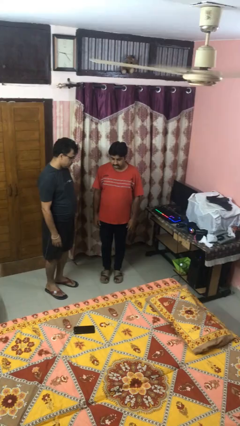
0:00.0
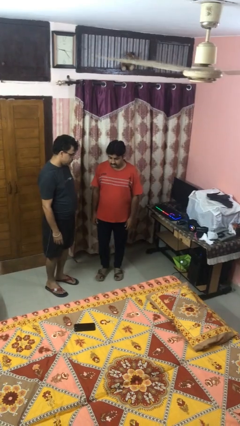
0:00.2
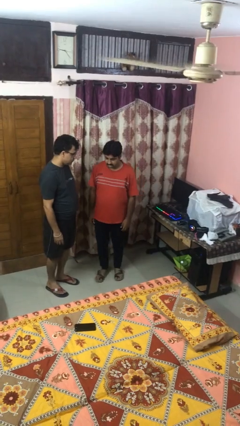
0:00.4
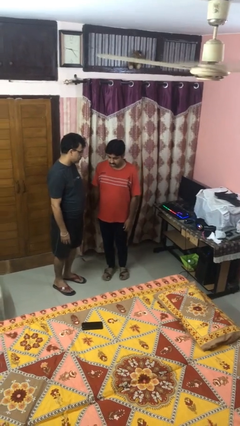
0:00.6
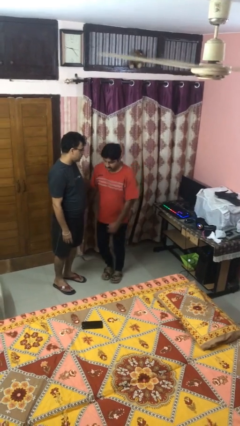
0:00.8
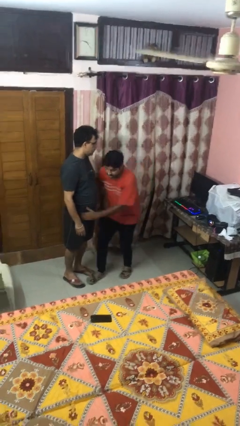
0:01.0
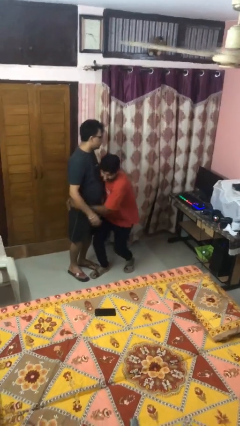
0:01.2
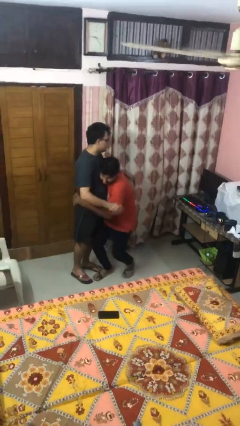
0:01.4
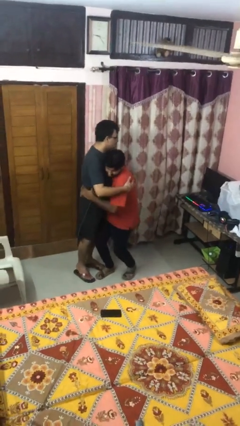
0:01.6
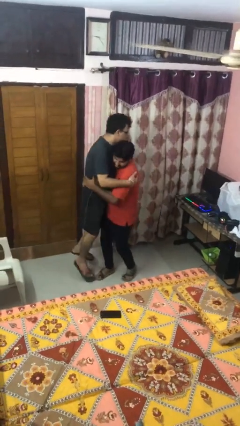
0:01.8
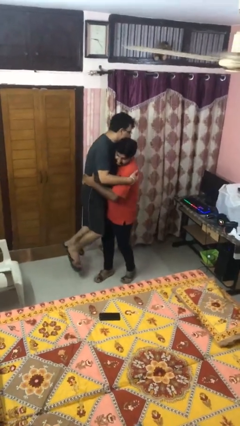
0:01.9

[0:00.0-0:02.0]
person picks up person

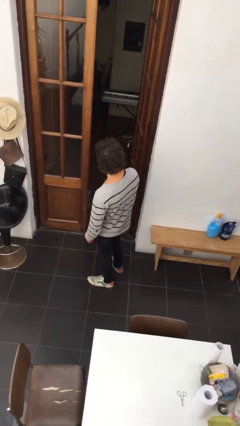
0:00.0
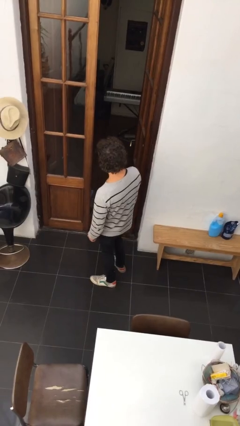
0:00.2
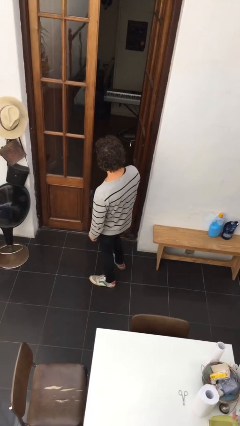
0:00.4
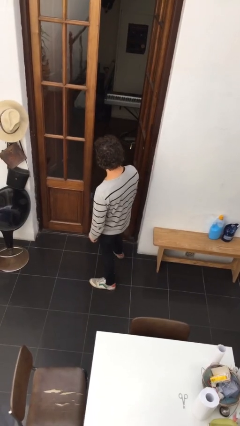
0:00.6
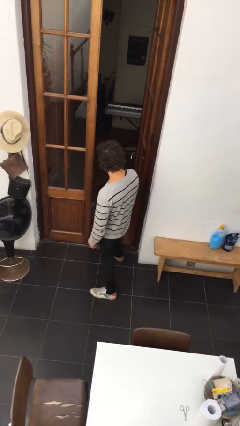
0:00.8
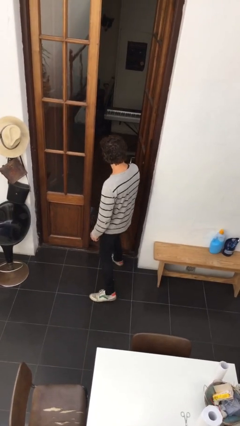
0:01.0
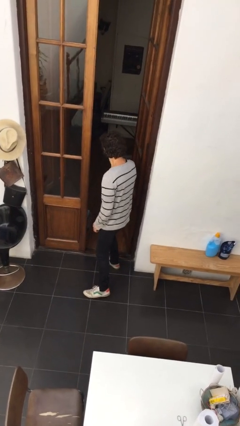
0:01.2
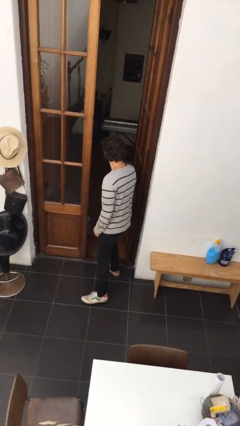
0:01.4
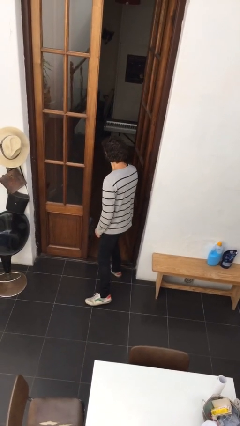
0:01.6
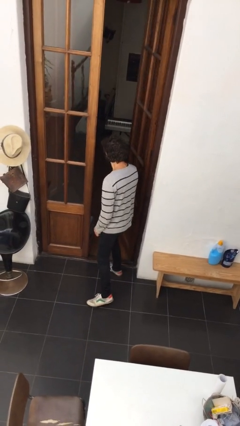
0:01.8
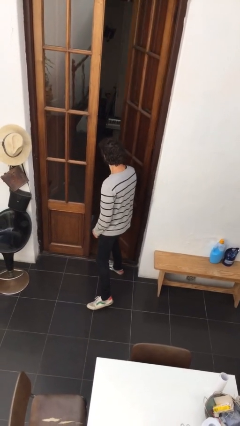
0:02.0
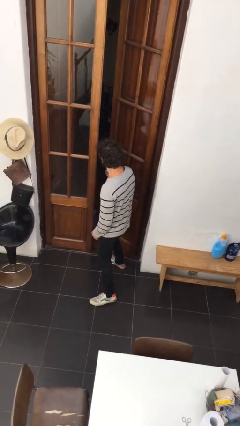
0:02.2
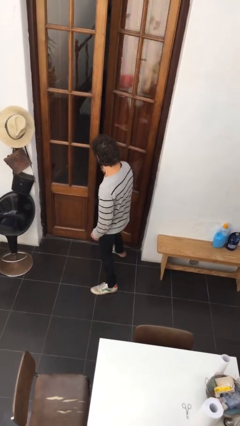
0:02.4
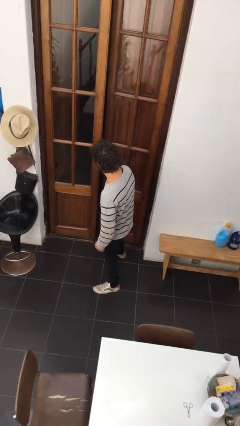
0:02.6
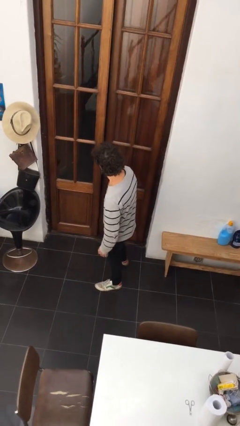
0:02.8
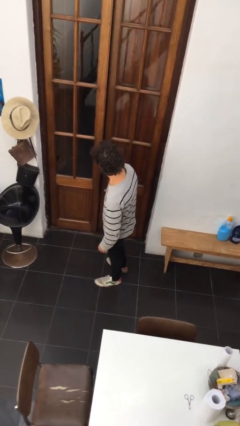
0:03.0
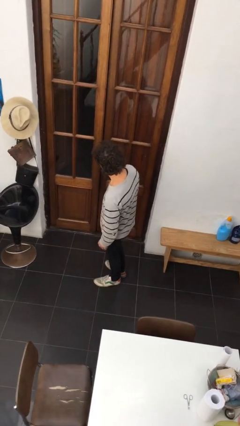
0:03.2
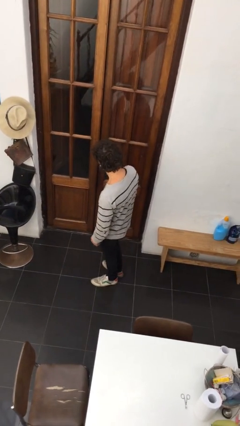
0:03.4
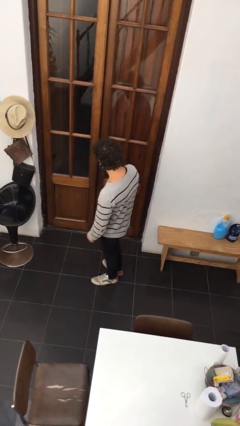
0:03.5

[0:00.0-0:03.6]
person closes facility door

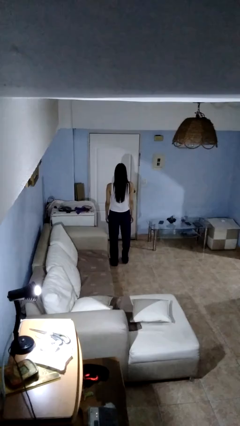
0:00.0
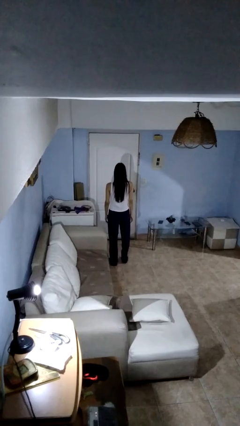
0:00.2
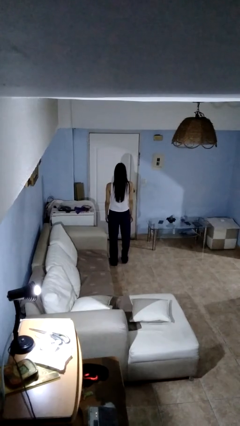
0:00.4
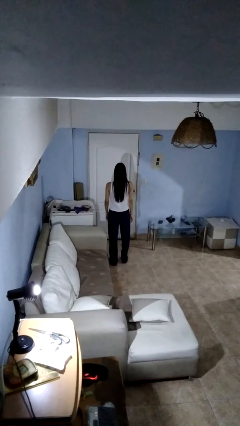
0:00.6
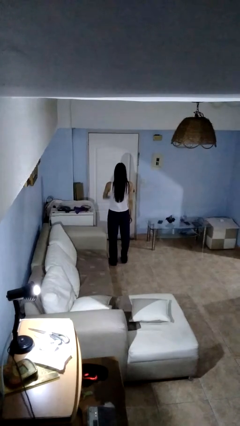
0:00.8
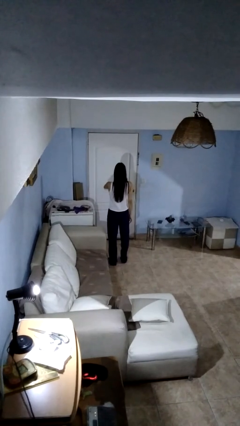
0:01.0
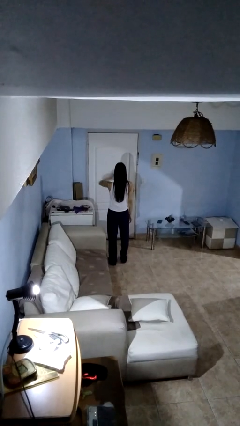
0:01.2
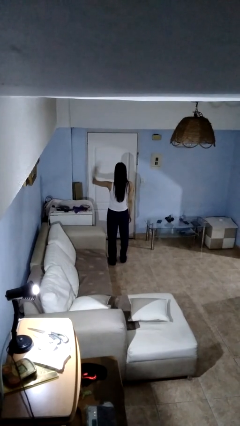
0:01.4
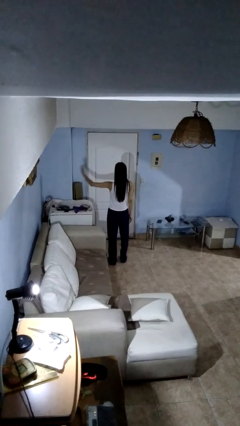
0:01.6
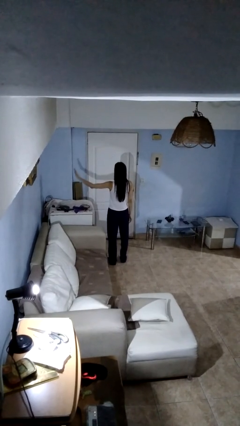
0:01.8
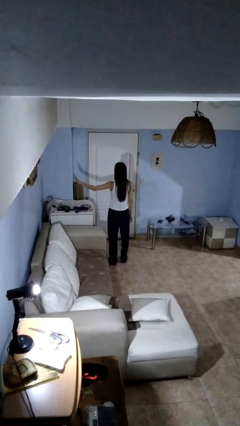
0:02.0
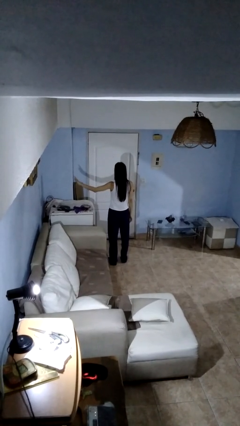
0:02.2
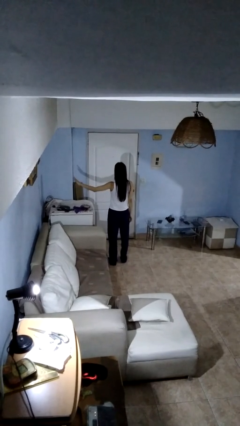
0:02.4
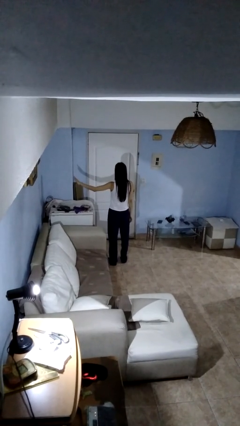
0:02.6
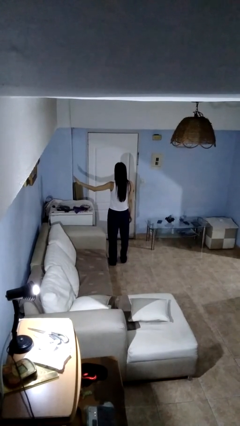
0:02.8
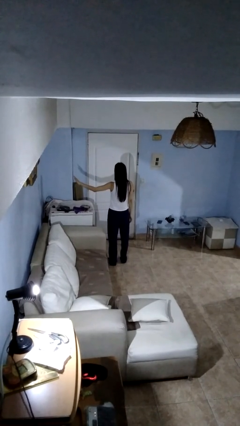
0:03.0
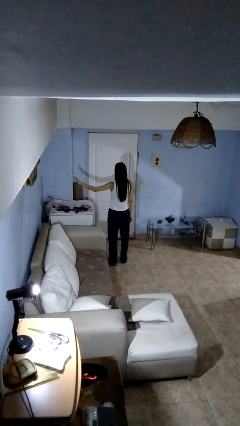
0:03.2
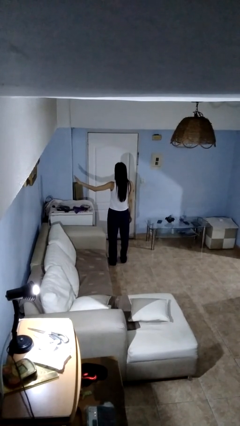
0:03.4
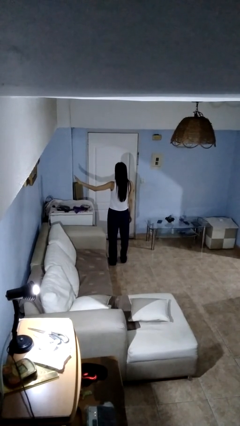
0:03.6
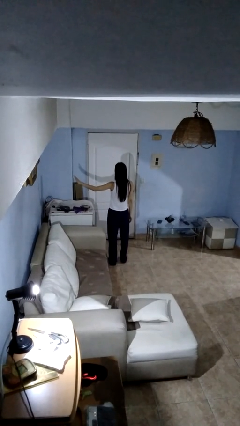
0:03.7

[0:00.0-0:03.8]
person gestures swipe left

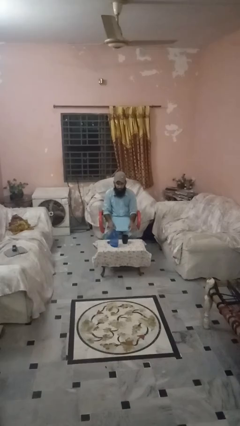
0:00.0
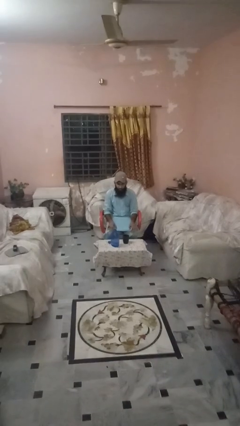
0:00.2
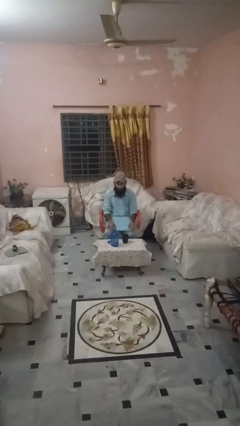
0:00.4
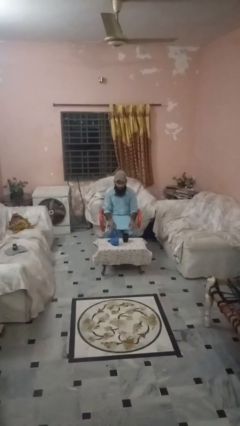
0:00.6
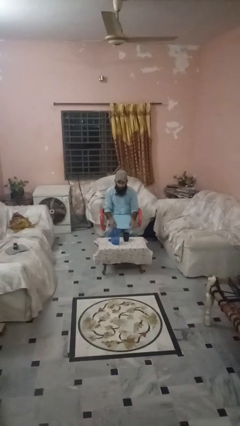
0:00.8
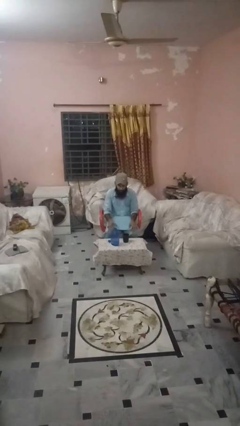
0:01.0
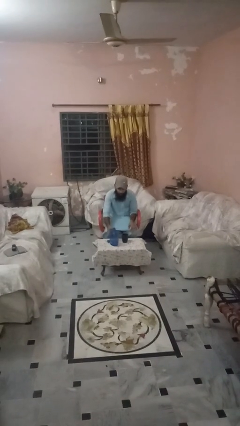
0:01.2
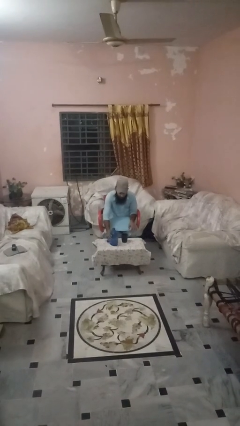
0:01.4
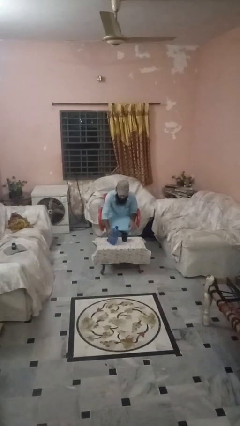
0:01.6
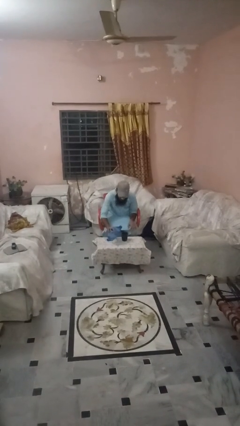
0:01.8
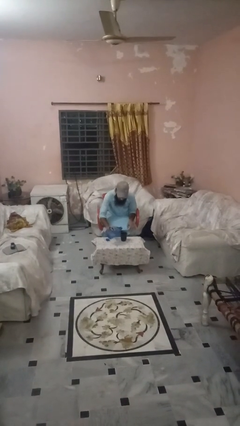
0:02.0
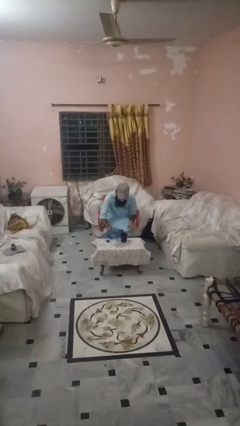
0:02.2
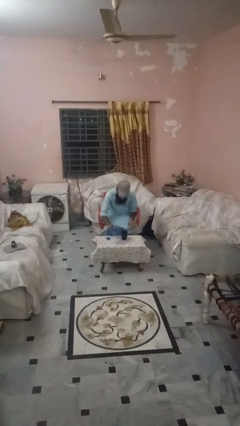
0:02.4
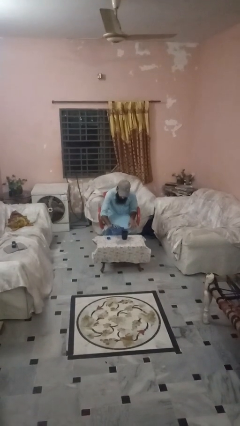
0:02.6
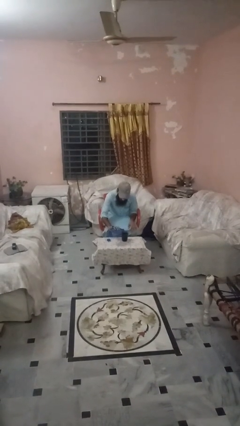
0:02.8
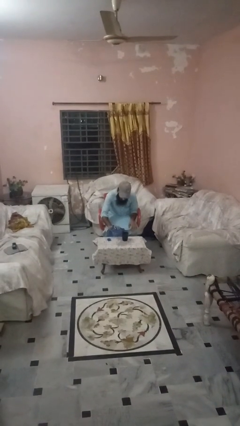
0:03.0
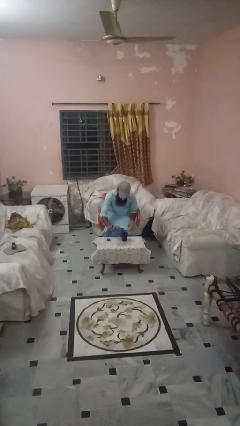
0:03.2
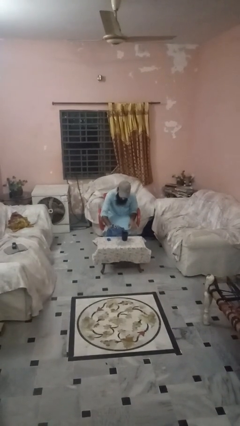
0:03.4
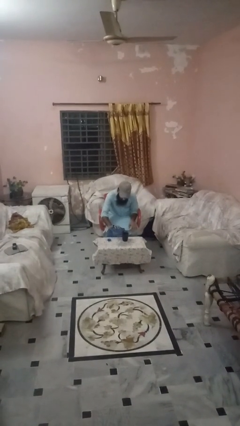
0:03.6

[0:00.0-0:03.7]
person pours liquid into cup

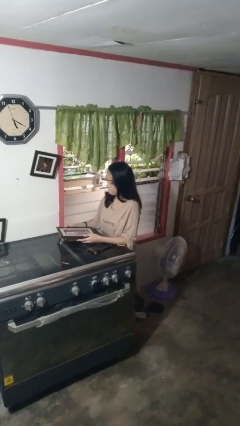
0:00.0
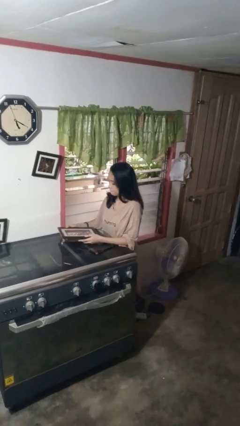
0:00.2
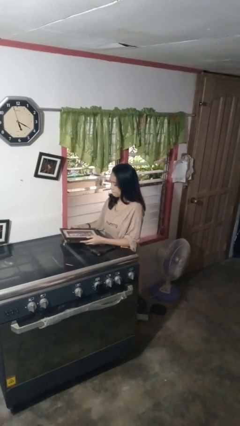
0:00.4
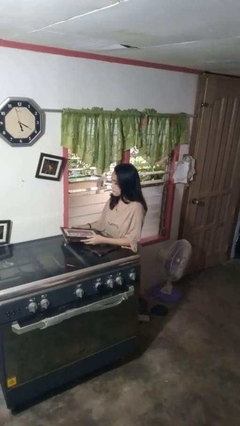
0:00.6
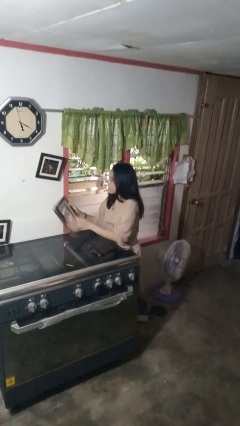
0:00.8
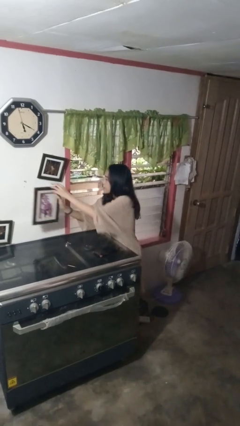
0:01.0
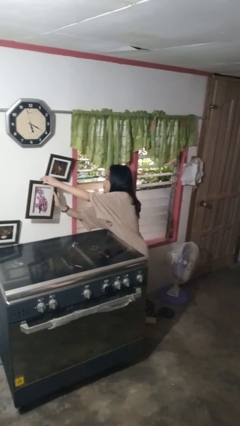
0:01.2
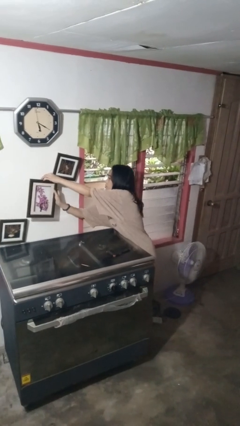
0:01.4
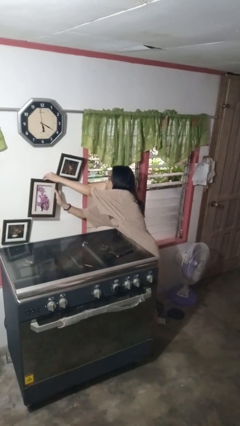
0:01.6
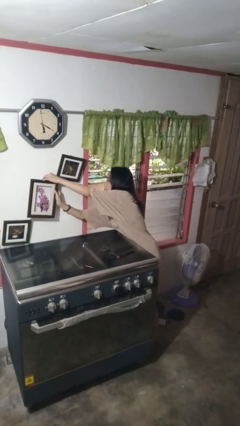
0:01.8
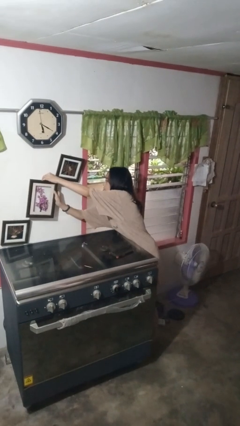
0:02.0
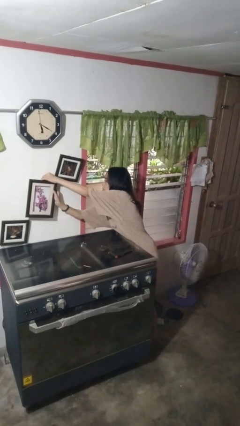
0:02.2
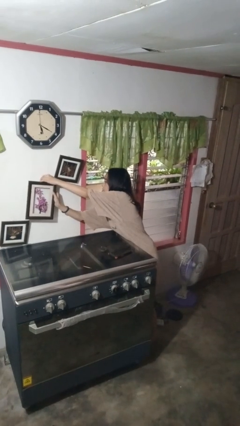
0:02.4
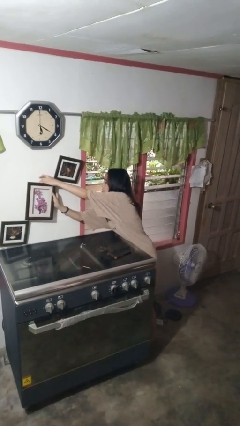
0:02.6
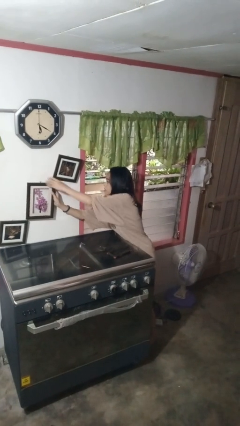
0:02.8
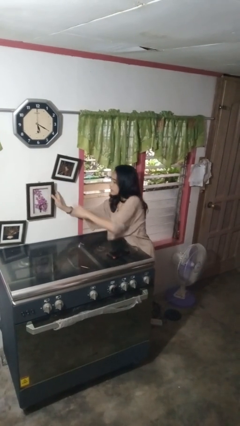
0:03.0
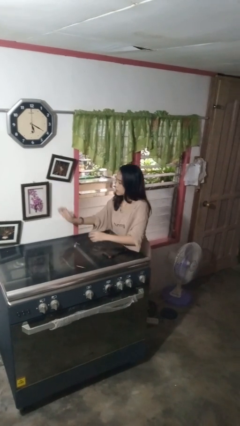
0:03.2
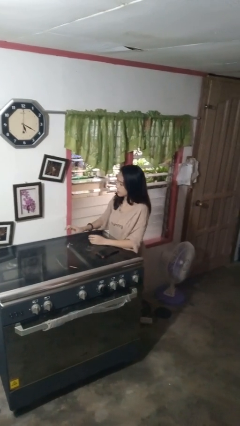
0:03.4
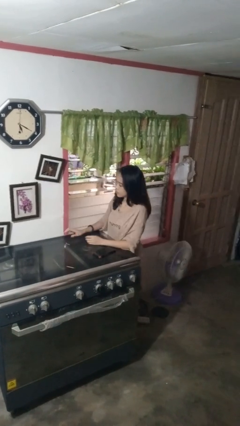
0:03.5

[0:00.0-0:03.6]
person puts up picture frame

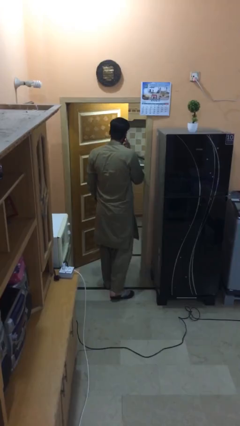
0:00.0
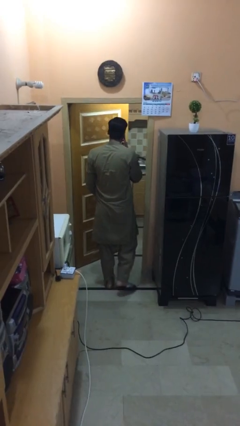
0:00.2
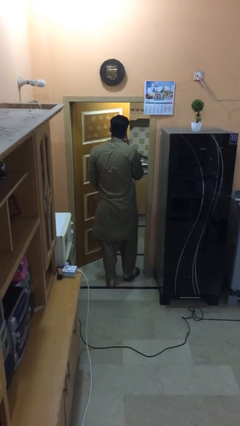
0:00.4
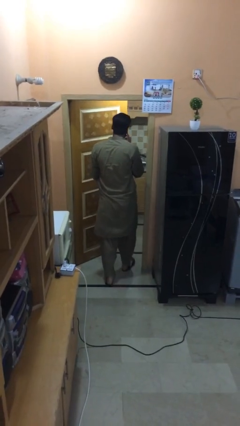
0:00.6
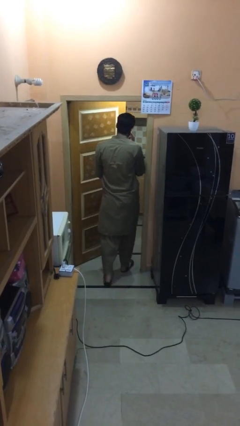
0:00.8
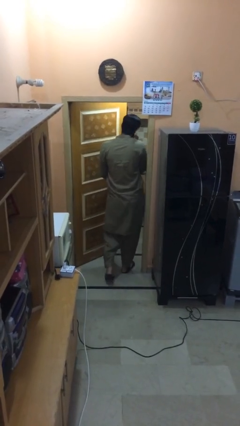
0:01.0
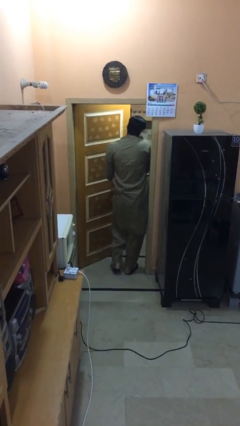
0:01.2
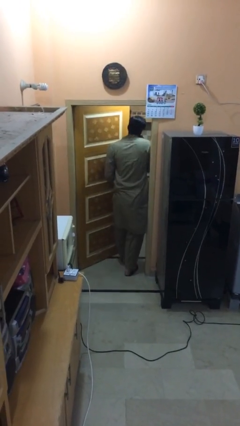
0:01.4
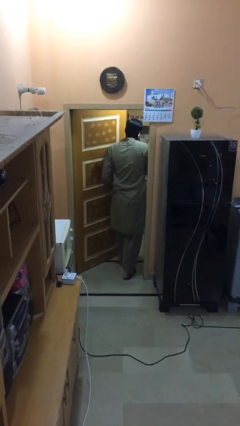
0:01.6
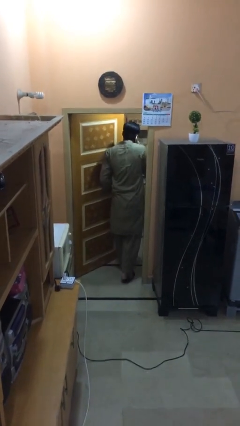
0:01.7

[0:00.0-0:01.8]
person exits scene through structure
